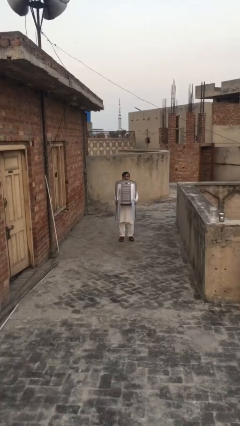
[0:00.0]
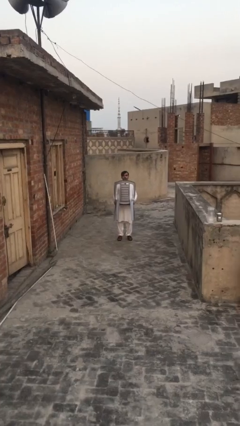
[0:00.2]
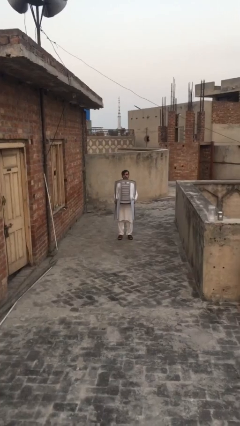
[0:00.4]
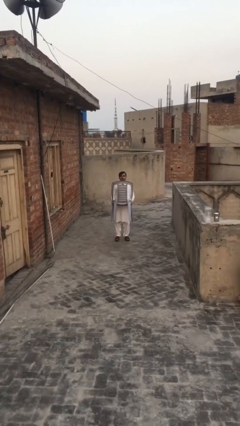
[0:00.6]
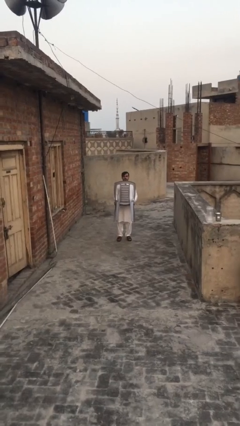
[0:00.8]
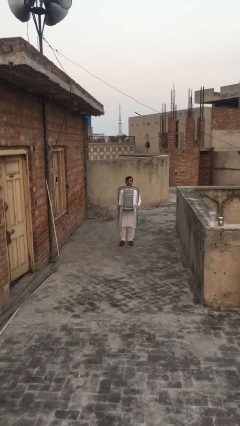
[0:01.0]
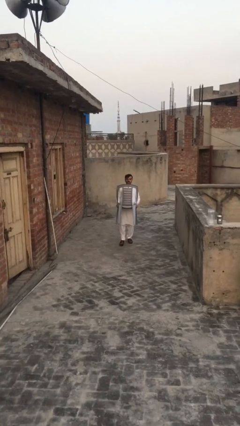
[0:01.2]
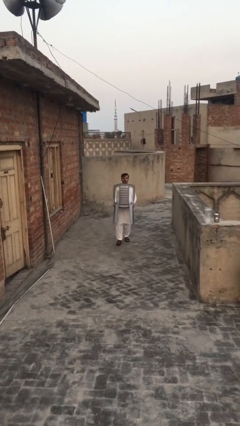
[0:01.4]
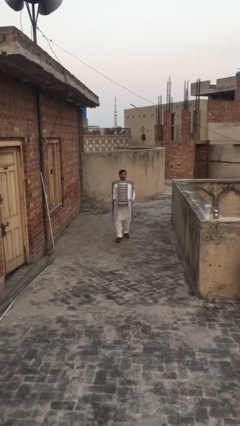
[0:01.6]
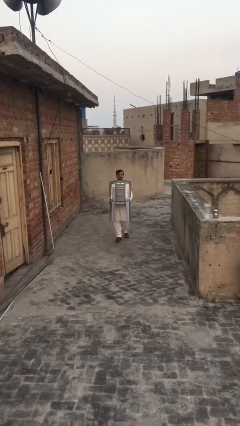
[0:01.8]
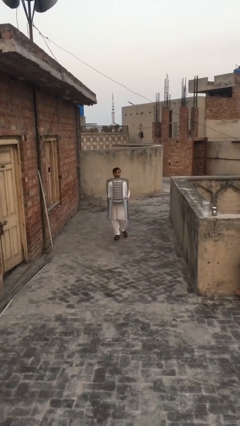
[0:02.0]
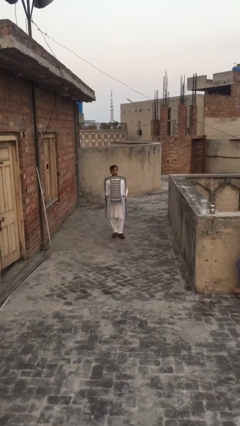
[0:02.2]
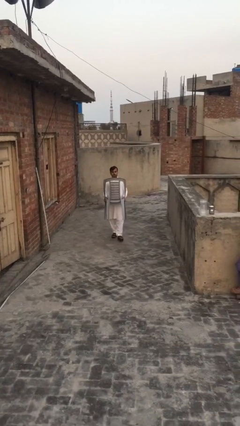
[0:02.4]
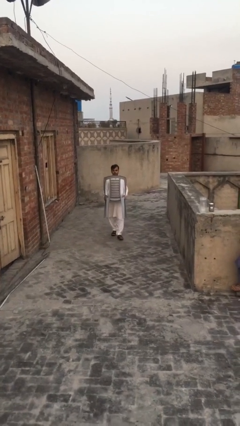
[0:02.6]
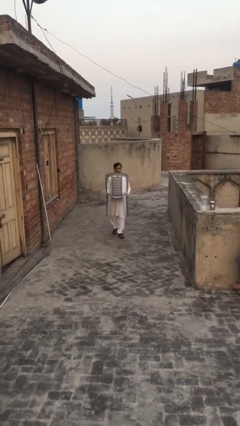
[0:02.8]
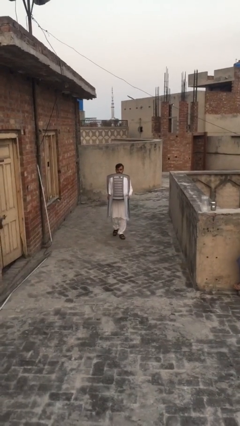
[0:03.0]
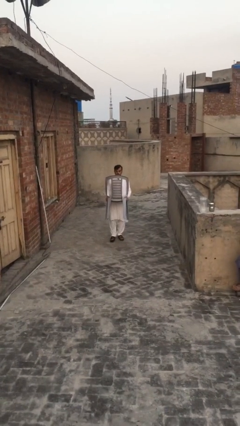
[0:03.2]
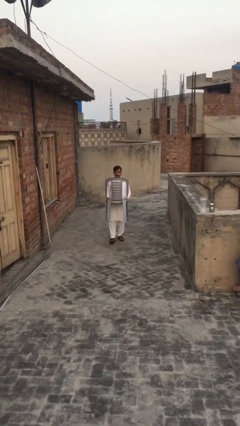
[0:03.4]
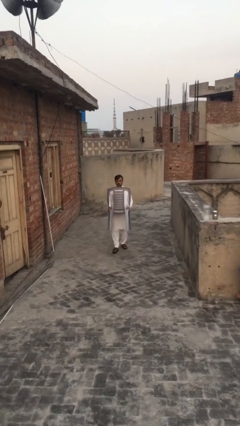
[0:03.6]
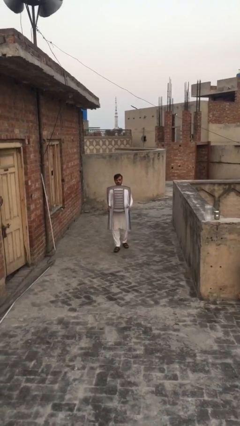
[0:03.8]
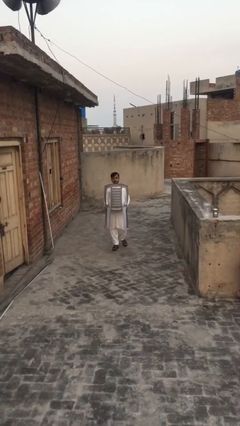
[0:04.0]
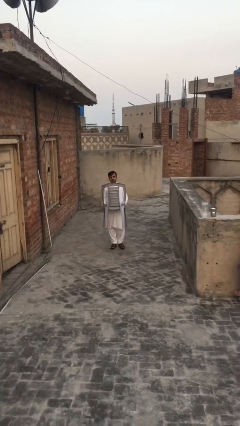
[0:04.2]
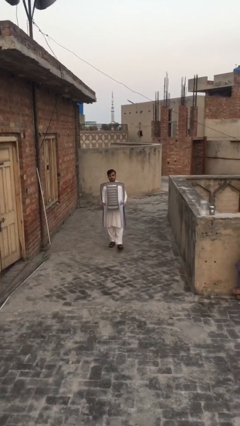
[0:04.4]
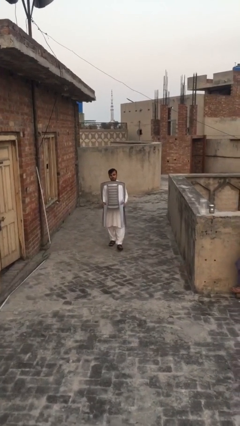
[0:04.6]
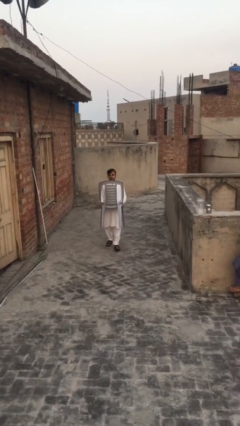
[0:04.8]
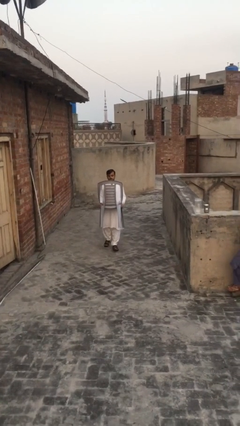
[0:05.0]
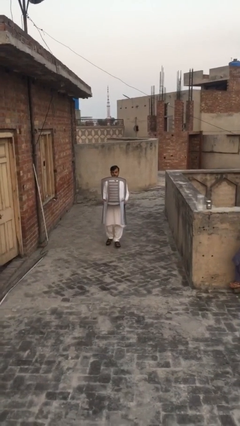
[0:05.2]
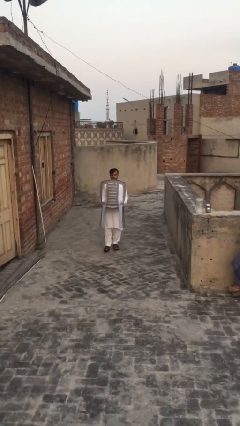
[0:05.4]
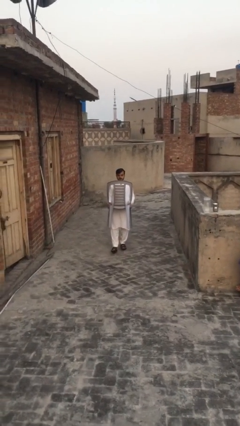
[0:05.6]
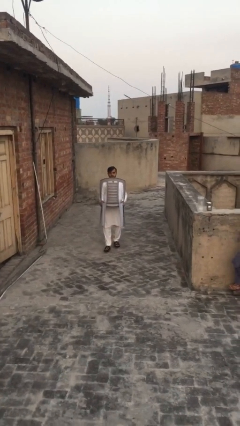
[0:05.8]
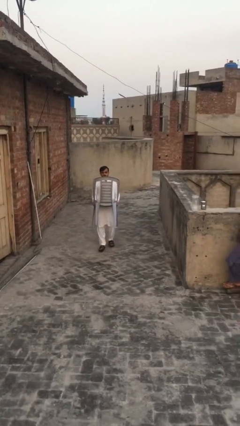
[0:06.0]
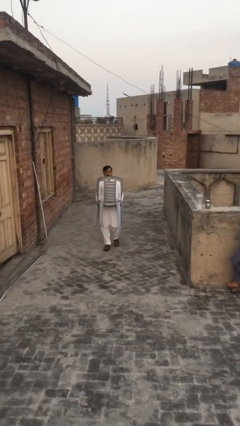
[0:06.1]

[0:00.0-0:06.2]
person carries heavy object

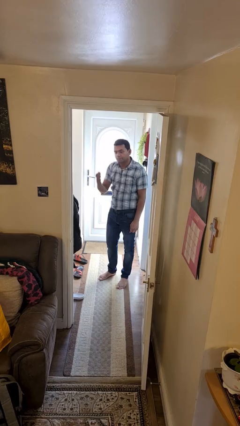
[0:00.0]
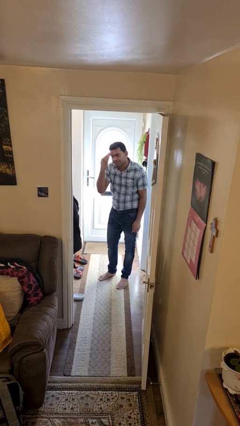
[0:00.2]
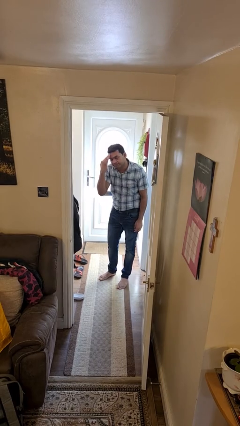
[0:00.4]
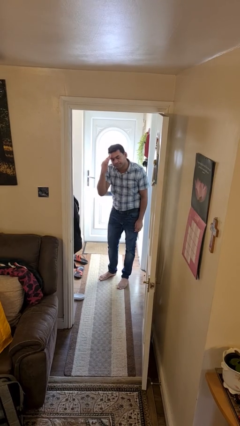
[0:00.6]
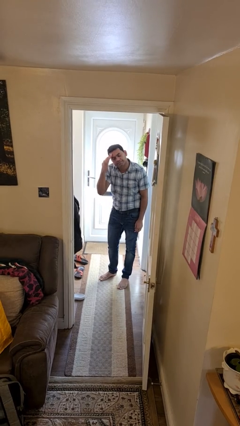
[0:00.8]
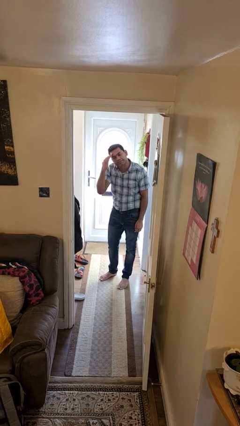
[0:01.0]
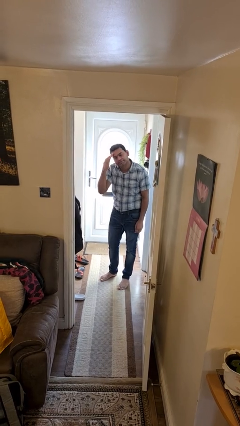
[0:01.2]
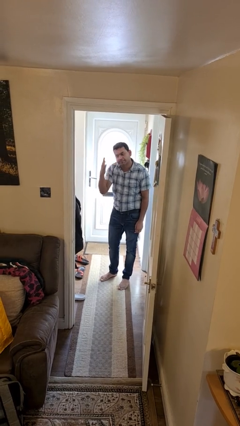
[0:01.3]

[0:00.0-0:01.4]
person salutes

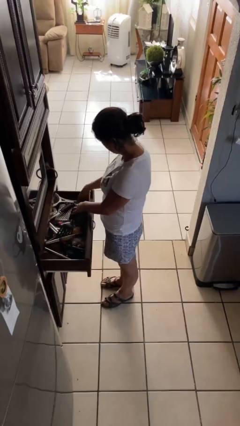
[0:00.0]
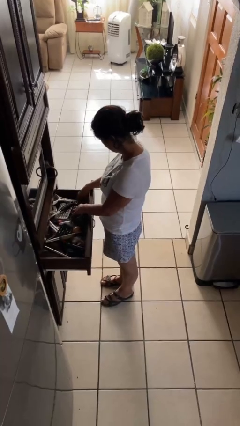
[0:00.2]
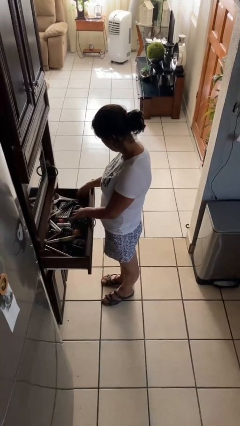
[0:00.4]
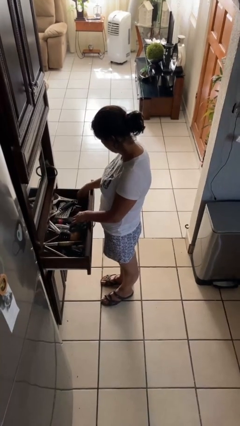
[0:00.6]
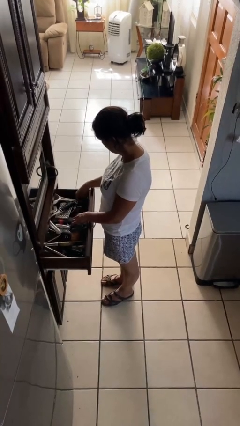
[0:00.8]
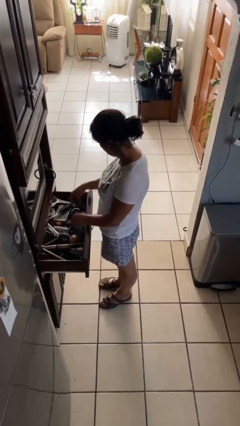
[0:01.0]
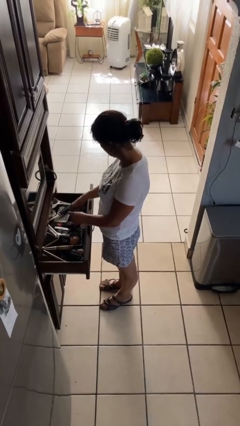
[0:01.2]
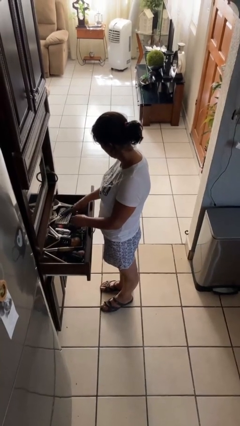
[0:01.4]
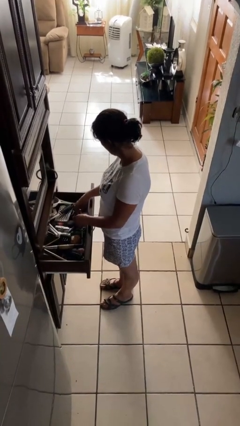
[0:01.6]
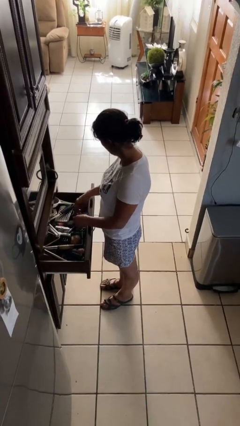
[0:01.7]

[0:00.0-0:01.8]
person searches in kitchen drawer

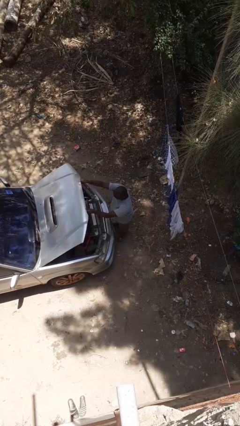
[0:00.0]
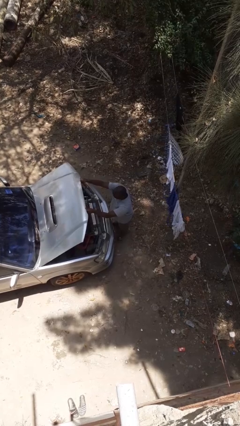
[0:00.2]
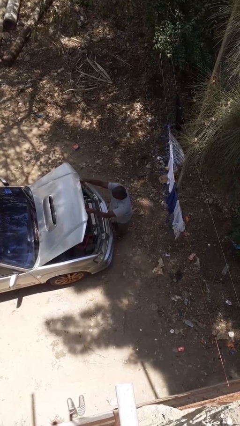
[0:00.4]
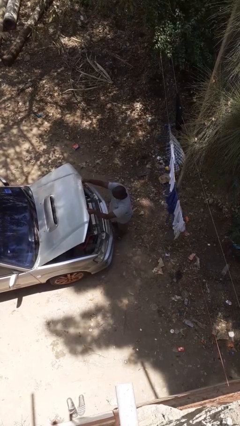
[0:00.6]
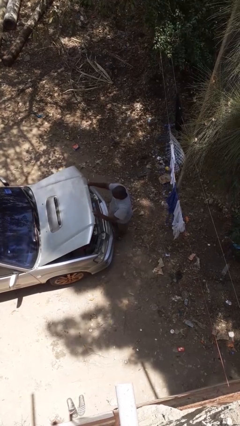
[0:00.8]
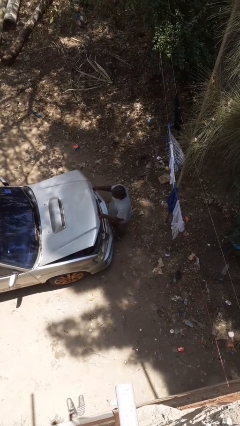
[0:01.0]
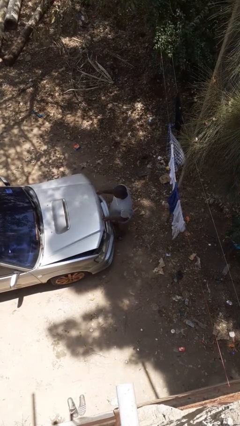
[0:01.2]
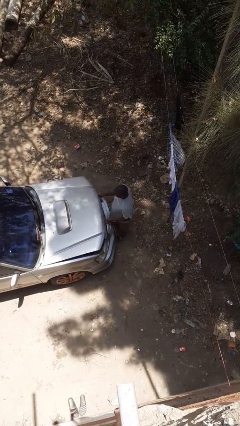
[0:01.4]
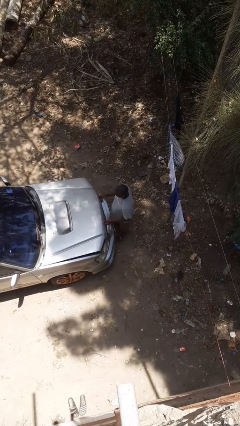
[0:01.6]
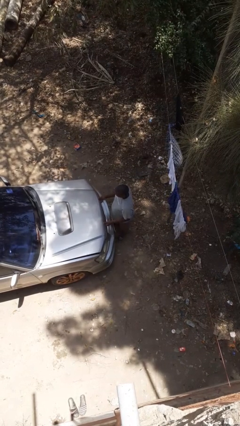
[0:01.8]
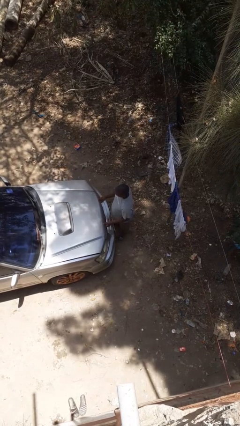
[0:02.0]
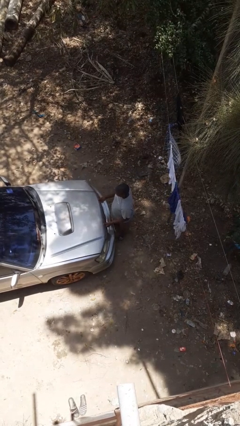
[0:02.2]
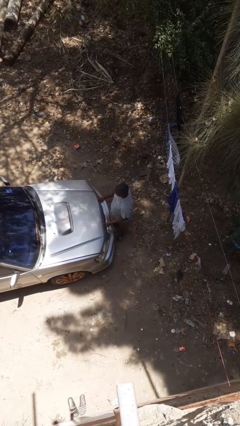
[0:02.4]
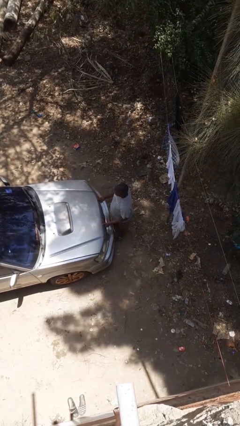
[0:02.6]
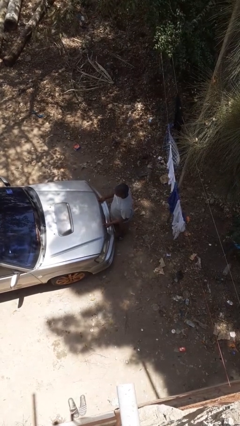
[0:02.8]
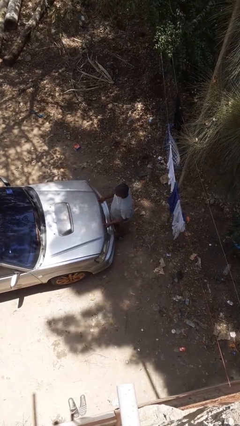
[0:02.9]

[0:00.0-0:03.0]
person closes car hood

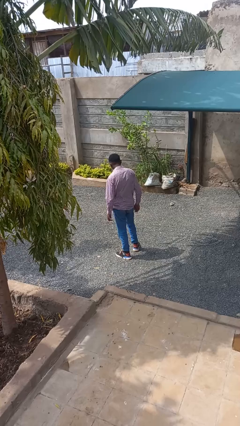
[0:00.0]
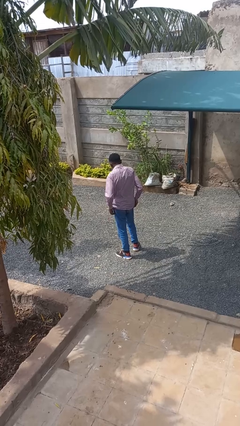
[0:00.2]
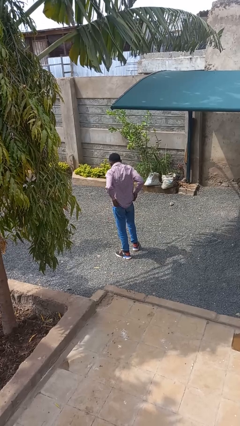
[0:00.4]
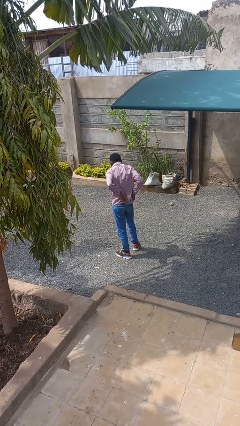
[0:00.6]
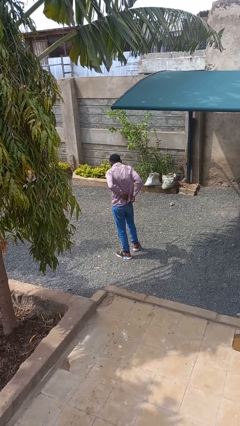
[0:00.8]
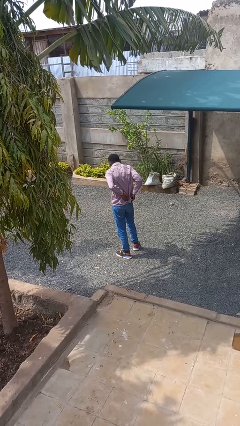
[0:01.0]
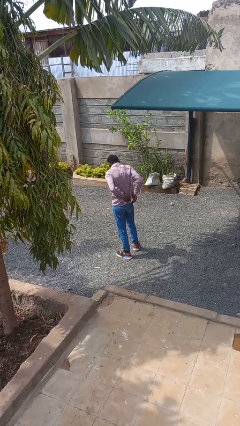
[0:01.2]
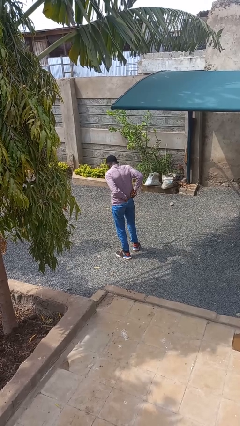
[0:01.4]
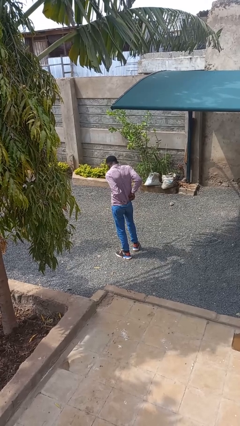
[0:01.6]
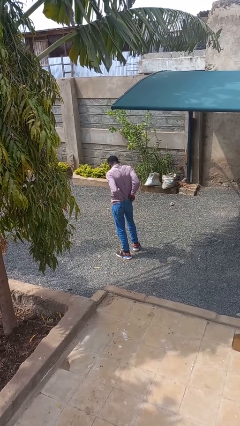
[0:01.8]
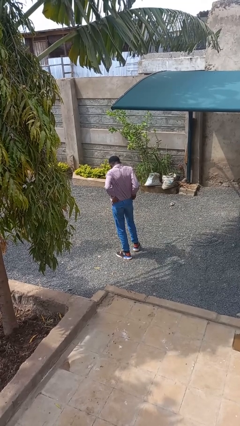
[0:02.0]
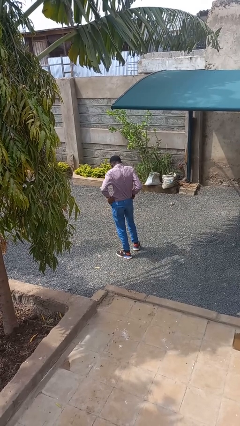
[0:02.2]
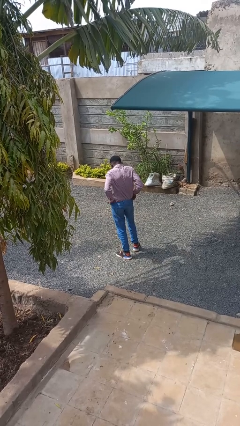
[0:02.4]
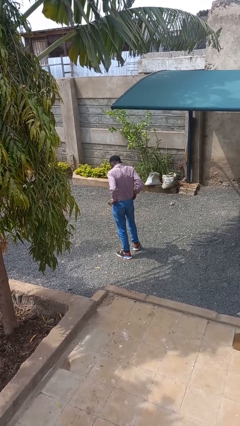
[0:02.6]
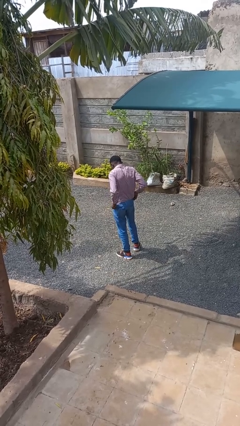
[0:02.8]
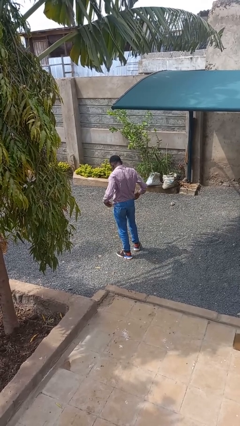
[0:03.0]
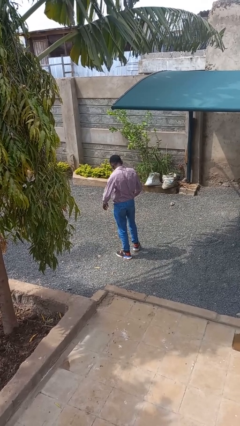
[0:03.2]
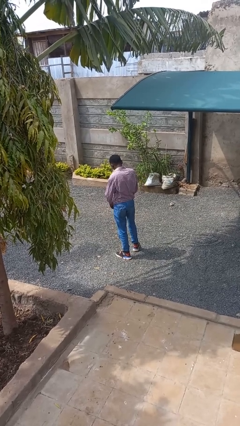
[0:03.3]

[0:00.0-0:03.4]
person tucks in shirt

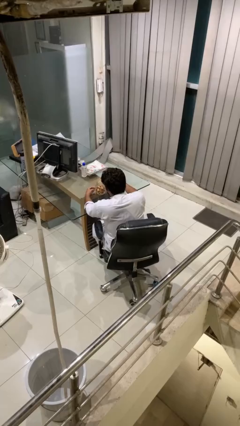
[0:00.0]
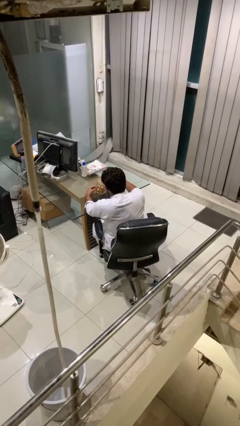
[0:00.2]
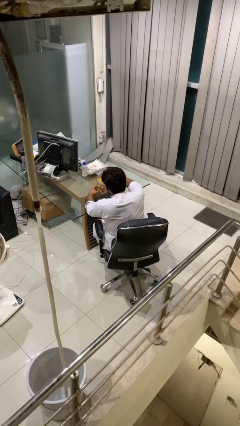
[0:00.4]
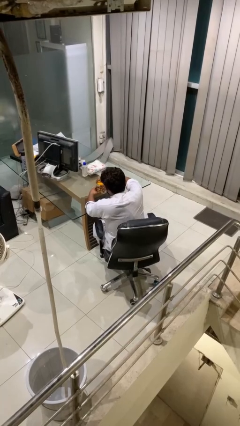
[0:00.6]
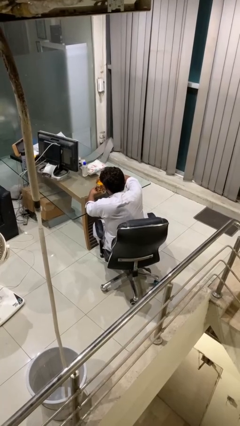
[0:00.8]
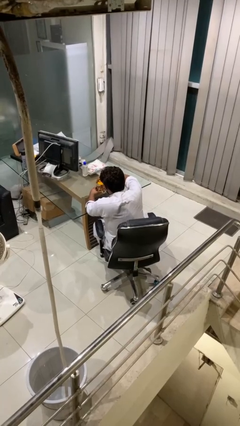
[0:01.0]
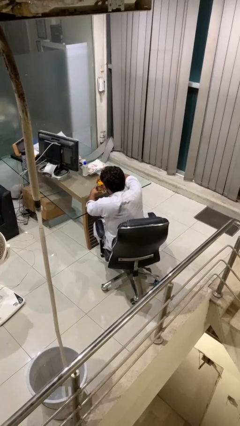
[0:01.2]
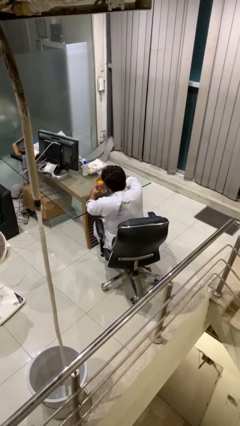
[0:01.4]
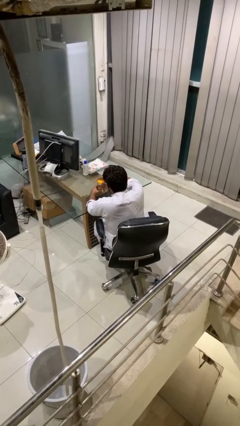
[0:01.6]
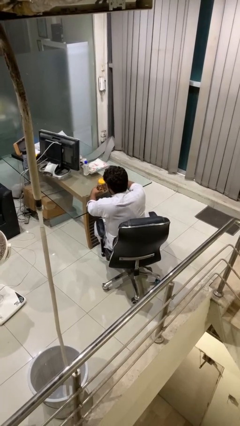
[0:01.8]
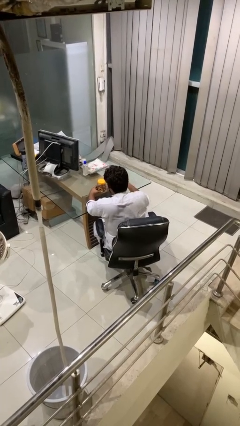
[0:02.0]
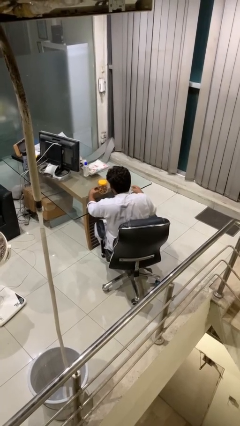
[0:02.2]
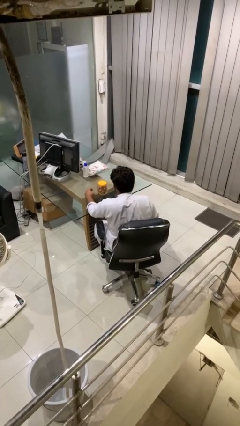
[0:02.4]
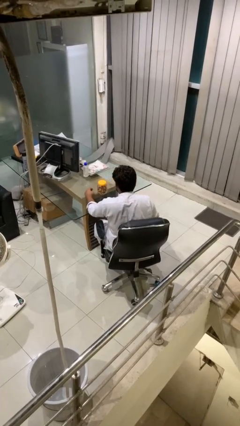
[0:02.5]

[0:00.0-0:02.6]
person closes jar
